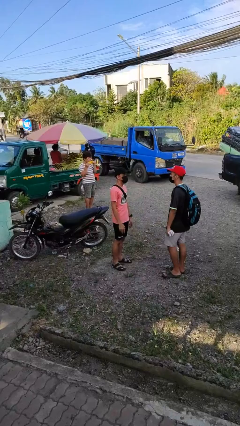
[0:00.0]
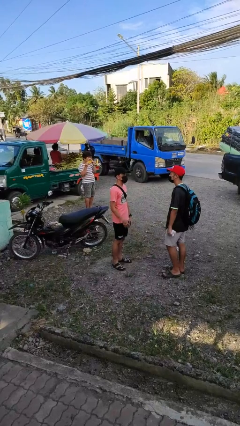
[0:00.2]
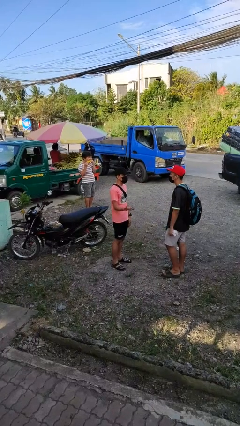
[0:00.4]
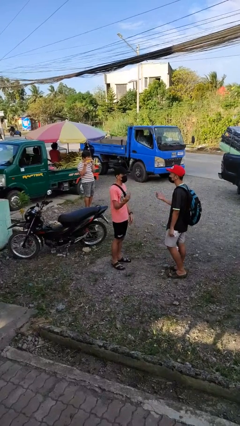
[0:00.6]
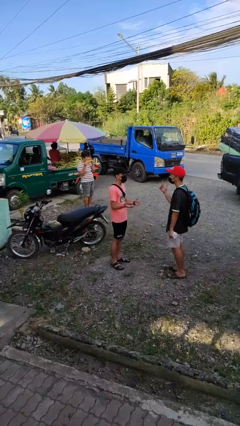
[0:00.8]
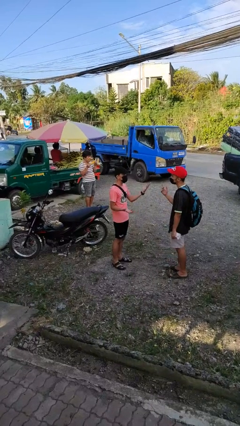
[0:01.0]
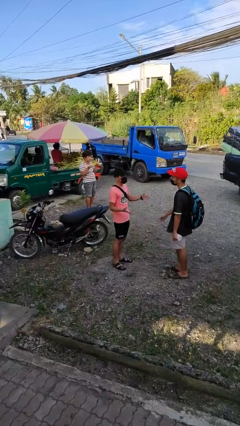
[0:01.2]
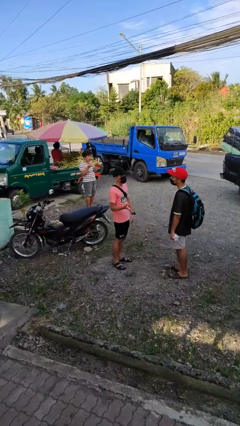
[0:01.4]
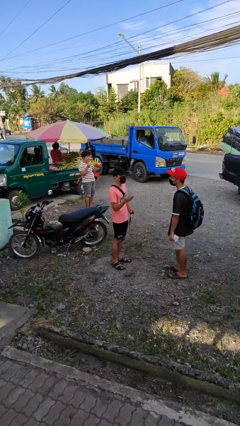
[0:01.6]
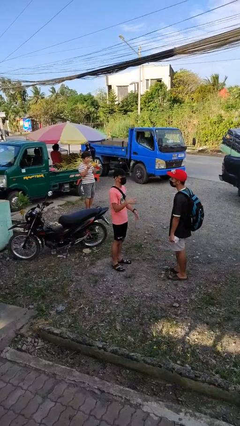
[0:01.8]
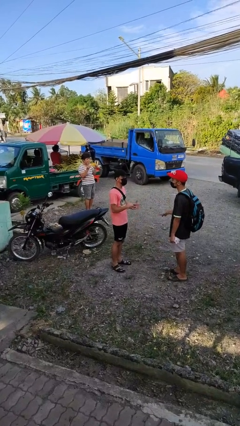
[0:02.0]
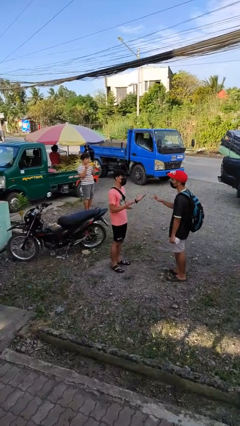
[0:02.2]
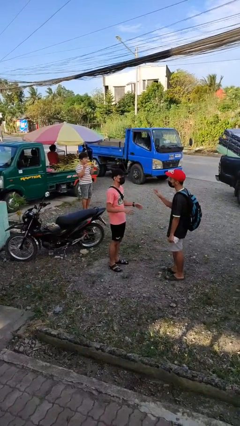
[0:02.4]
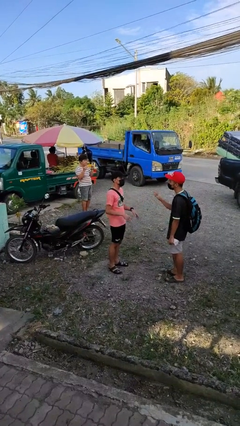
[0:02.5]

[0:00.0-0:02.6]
person talks to person

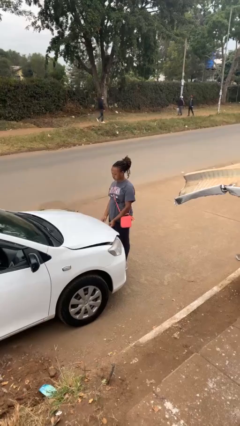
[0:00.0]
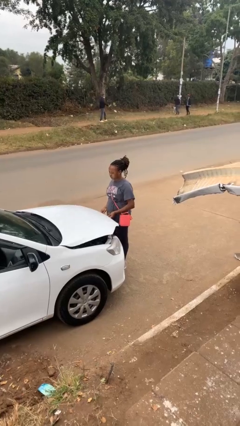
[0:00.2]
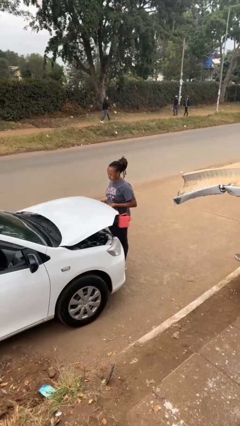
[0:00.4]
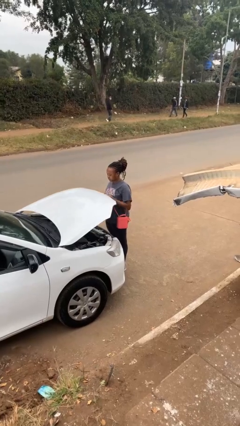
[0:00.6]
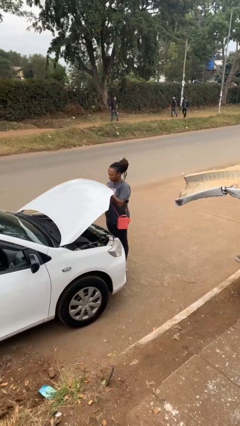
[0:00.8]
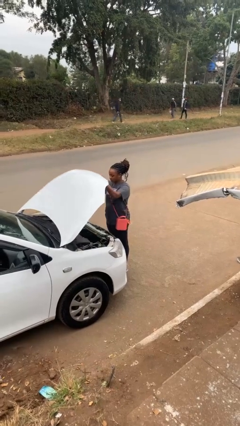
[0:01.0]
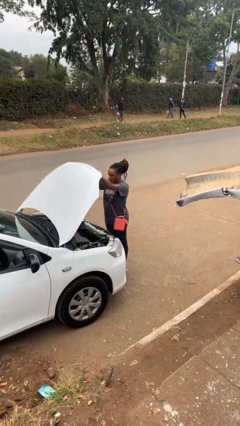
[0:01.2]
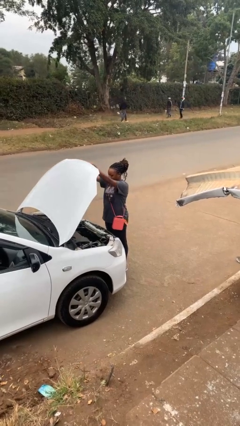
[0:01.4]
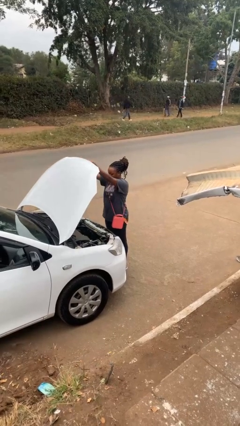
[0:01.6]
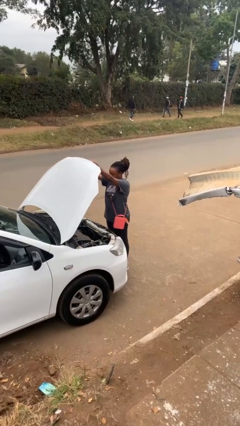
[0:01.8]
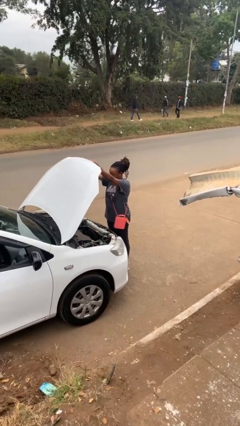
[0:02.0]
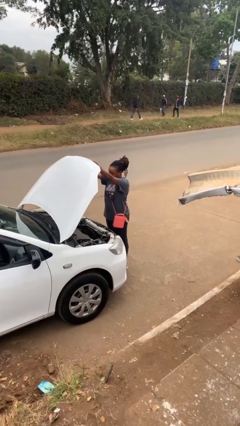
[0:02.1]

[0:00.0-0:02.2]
person opens car hood

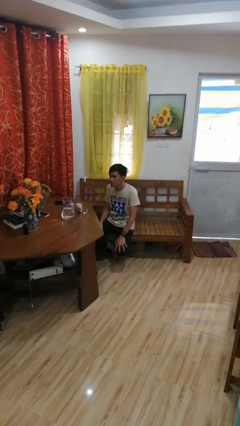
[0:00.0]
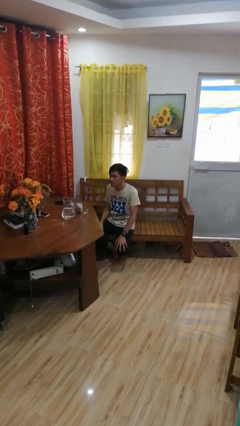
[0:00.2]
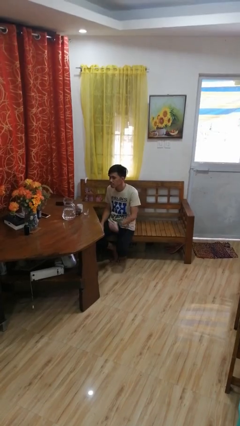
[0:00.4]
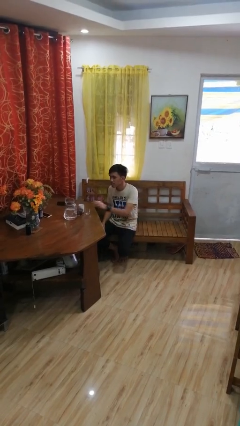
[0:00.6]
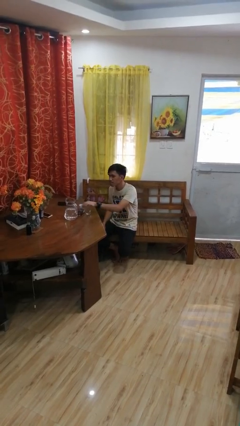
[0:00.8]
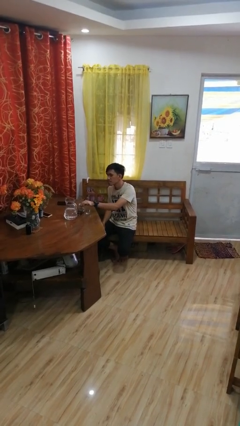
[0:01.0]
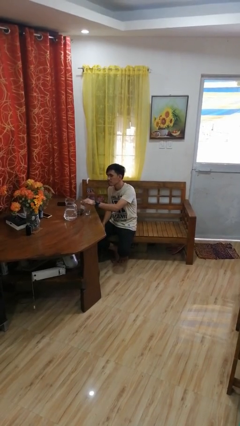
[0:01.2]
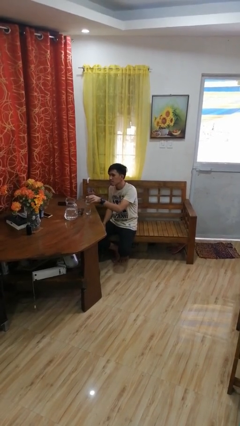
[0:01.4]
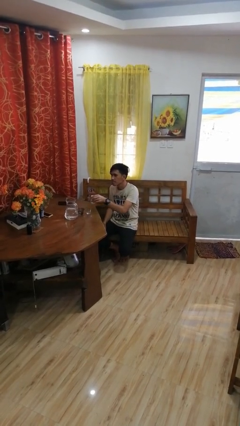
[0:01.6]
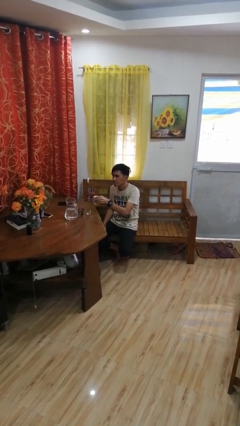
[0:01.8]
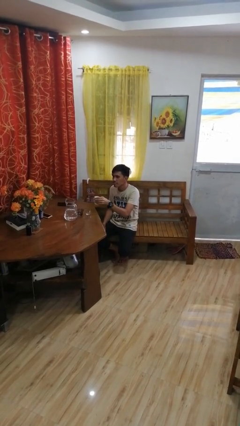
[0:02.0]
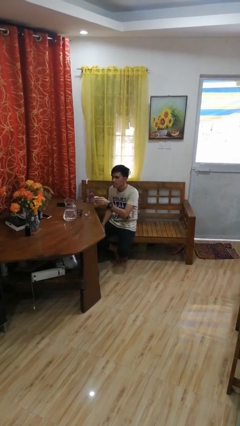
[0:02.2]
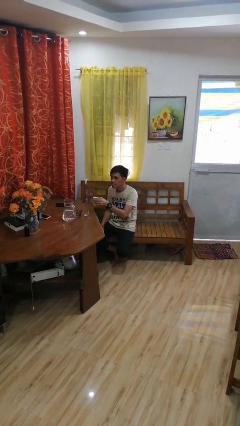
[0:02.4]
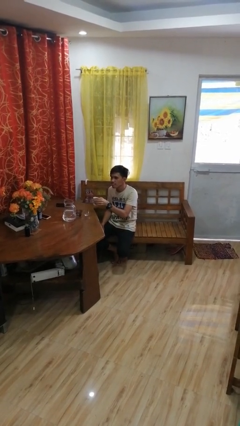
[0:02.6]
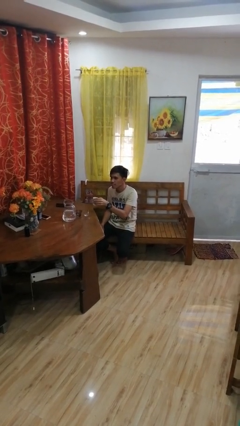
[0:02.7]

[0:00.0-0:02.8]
person picks up object from table

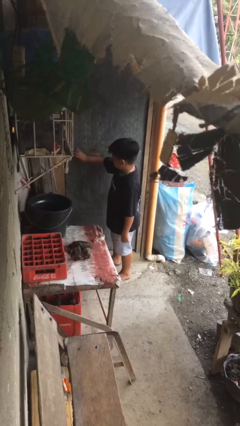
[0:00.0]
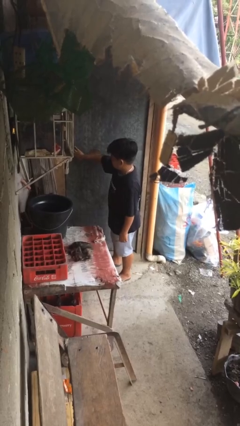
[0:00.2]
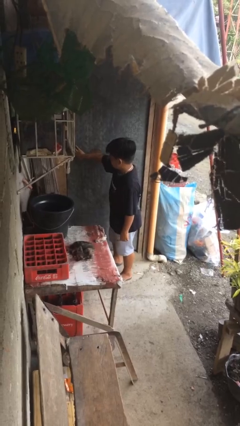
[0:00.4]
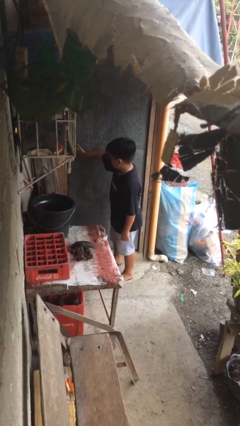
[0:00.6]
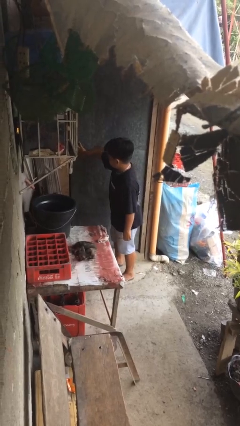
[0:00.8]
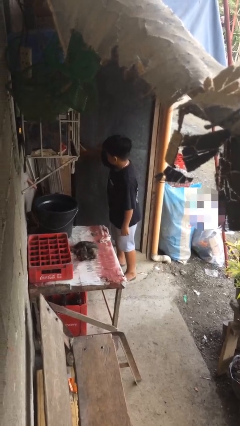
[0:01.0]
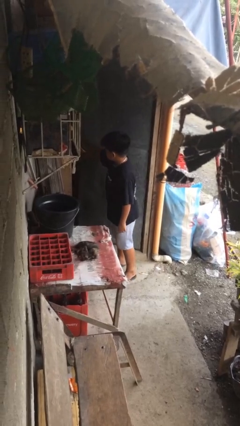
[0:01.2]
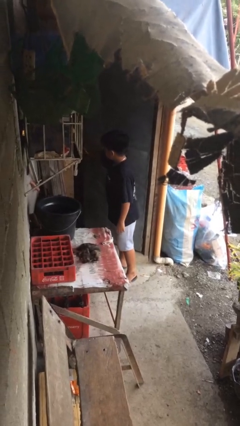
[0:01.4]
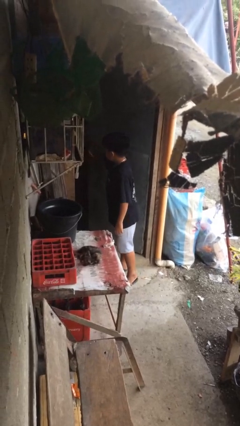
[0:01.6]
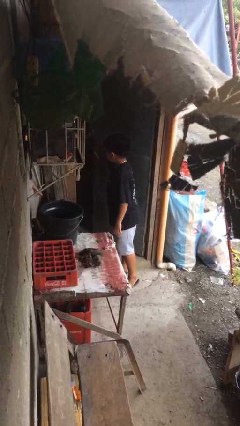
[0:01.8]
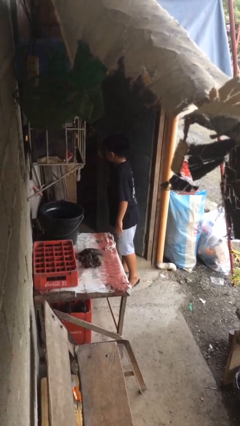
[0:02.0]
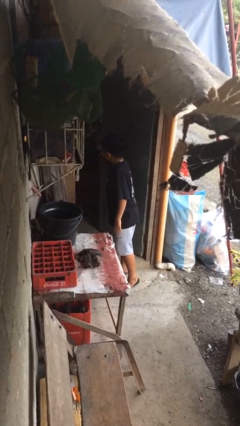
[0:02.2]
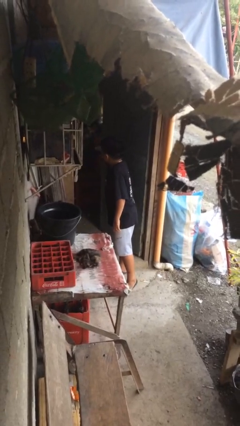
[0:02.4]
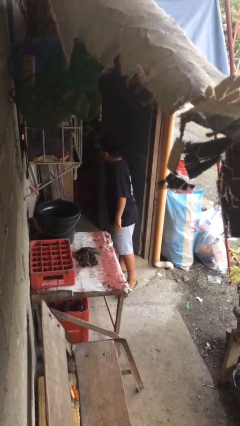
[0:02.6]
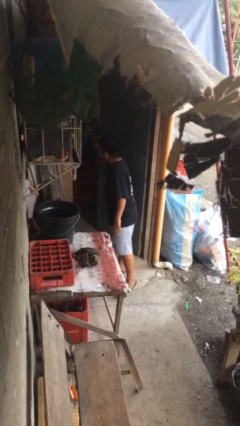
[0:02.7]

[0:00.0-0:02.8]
person opens facility door

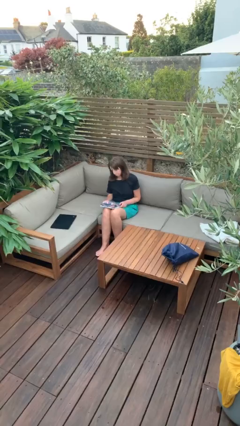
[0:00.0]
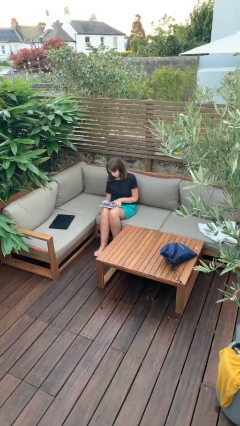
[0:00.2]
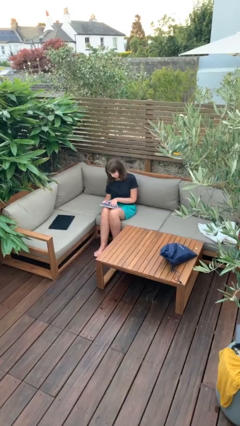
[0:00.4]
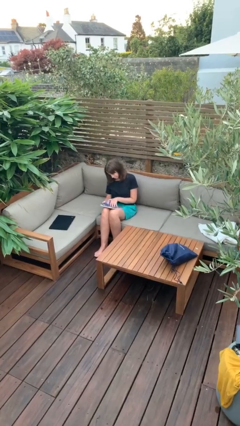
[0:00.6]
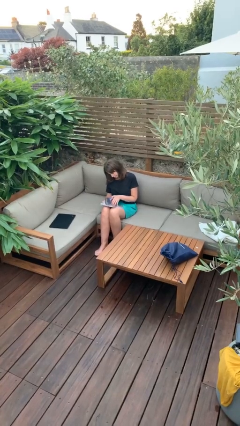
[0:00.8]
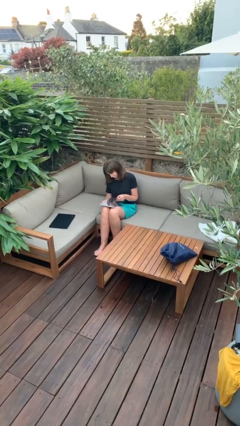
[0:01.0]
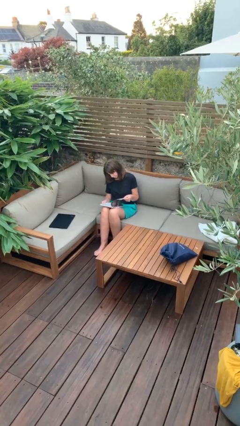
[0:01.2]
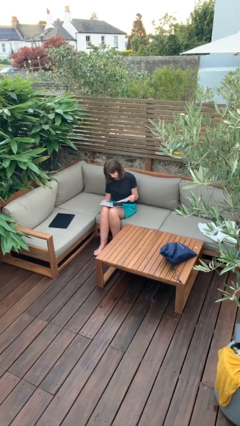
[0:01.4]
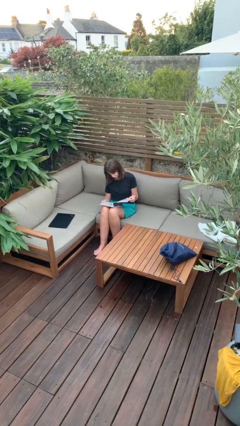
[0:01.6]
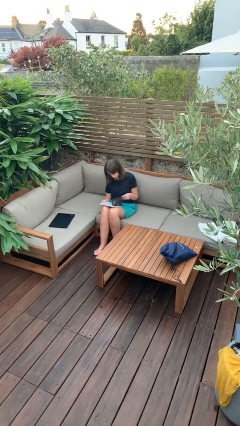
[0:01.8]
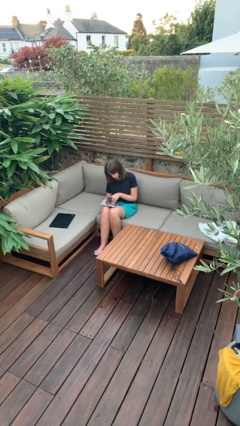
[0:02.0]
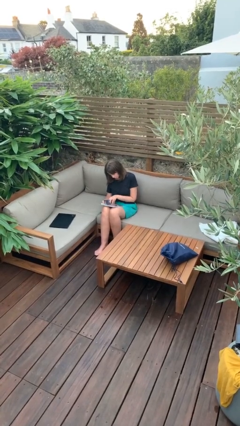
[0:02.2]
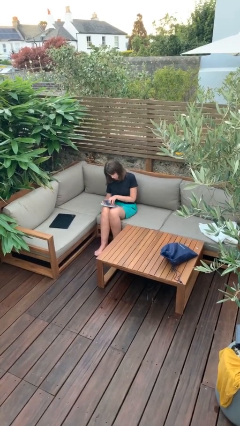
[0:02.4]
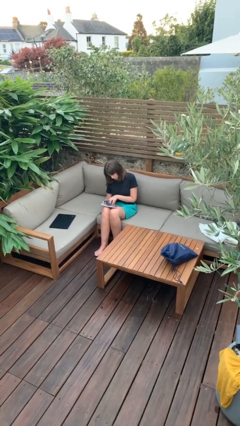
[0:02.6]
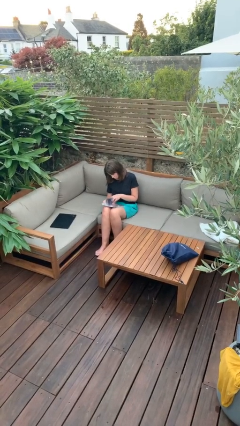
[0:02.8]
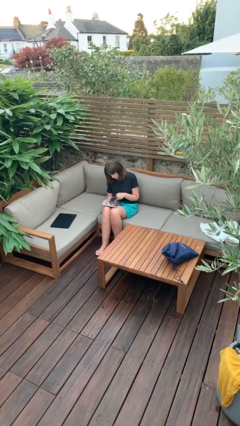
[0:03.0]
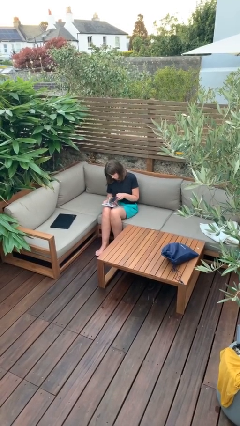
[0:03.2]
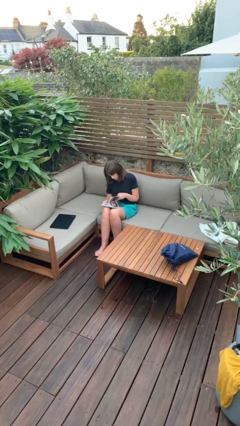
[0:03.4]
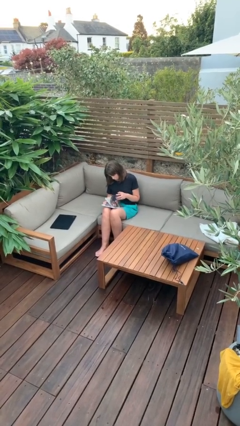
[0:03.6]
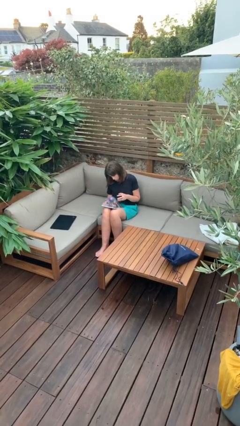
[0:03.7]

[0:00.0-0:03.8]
person reads document

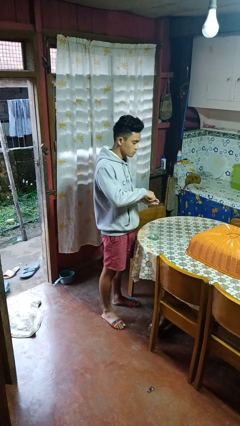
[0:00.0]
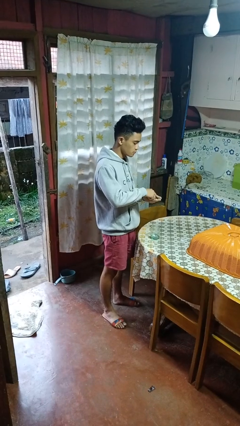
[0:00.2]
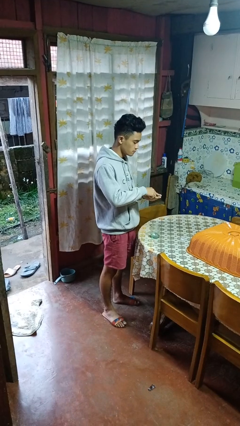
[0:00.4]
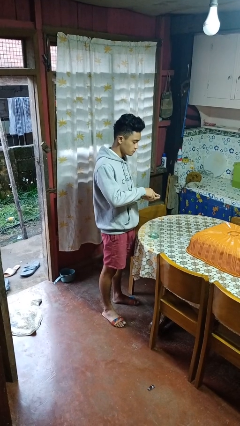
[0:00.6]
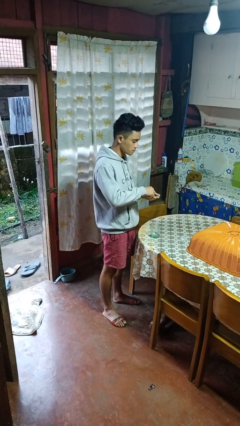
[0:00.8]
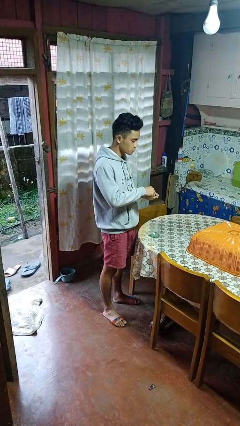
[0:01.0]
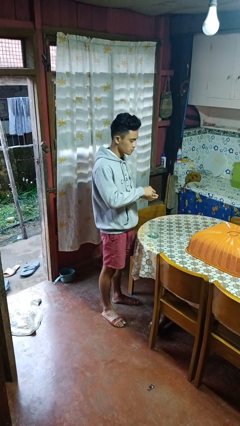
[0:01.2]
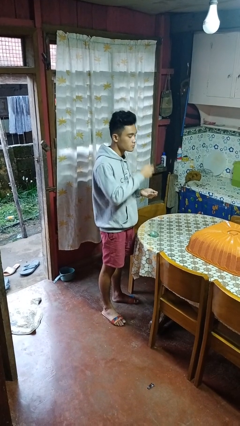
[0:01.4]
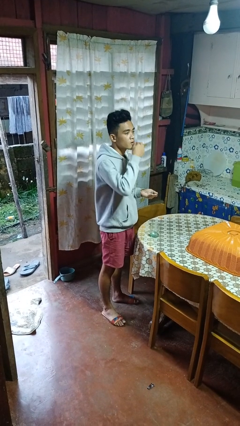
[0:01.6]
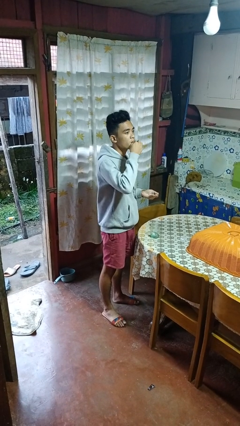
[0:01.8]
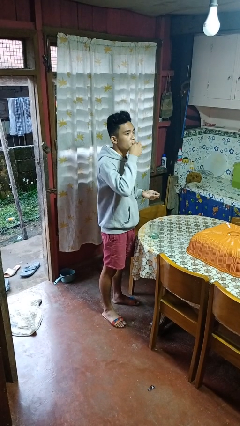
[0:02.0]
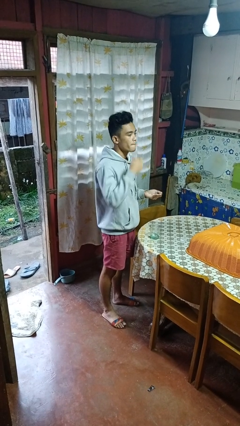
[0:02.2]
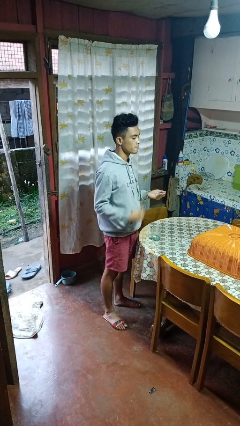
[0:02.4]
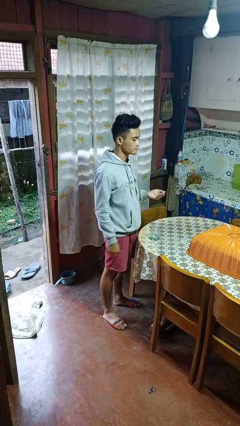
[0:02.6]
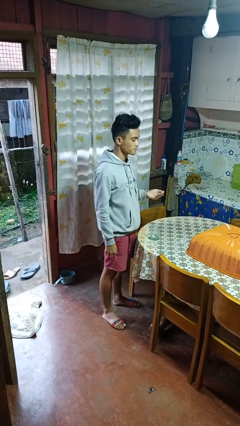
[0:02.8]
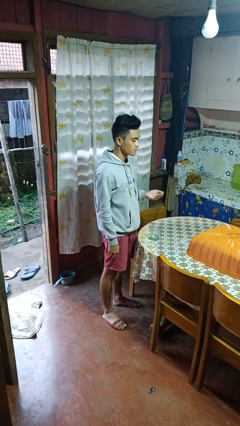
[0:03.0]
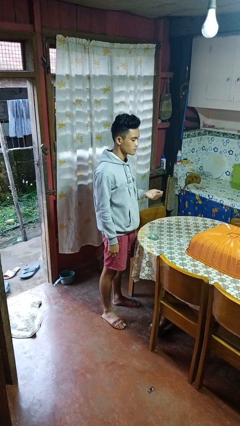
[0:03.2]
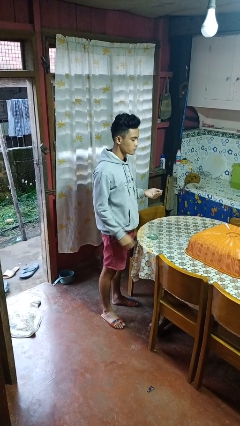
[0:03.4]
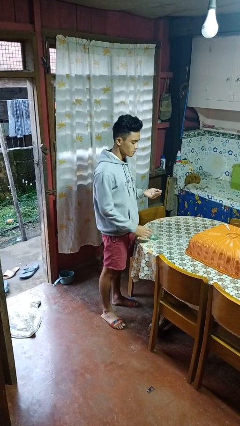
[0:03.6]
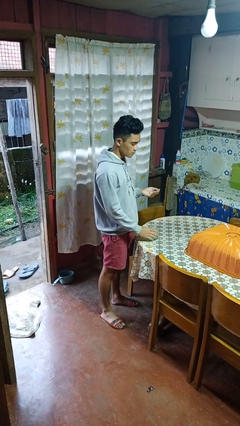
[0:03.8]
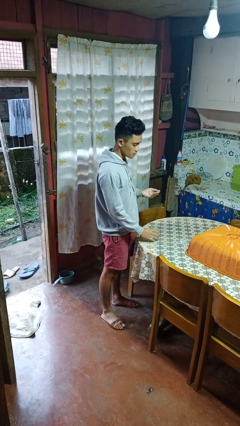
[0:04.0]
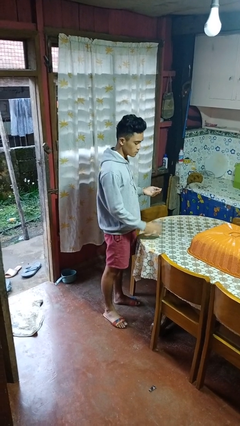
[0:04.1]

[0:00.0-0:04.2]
person takes medicine pills
